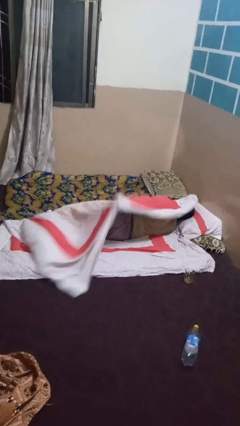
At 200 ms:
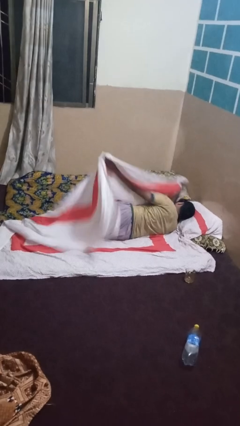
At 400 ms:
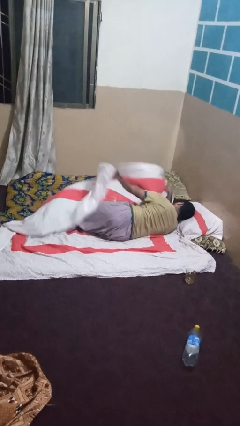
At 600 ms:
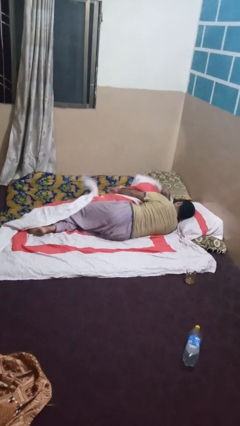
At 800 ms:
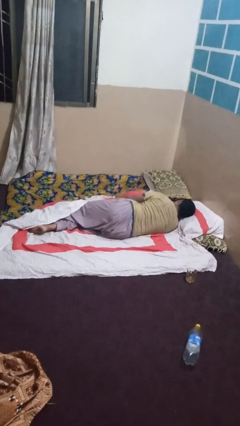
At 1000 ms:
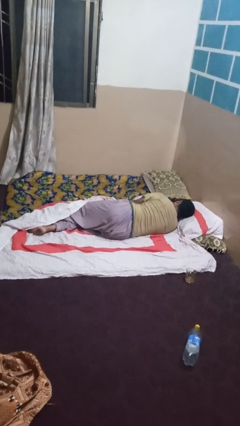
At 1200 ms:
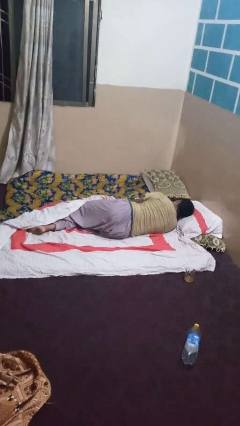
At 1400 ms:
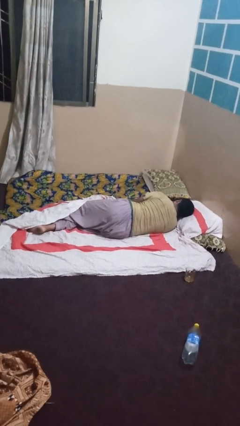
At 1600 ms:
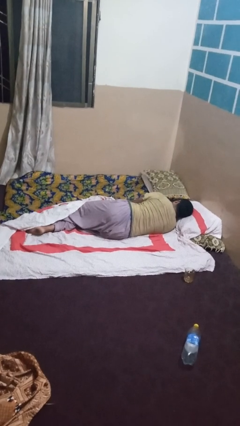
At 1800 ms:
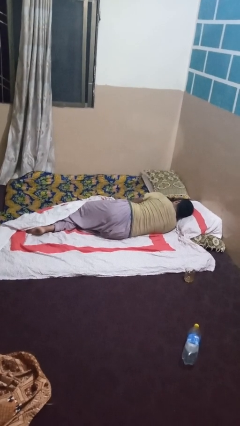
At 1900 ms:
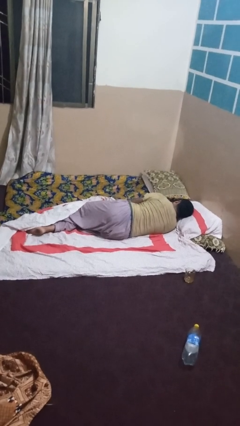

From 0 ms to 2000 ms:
person uncovers with bedsheets

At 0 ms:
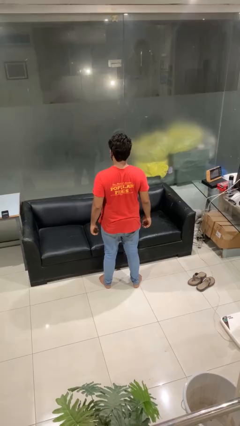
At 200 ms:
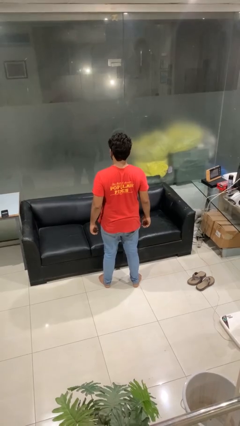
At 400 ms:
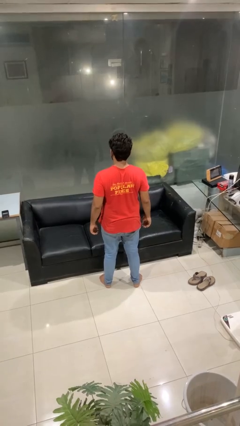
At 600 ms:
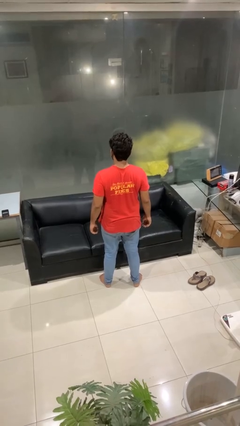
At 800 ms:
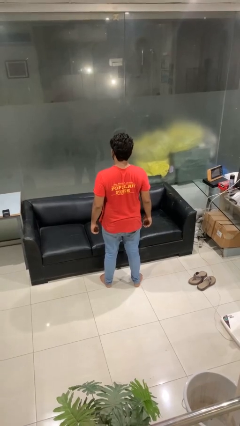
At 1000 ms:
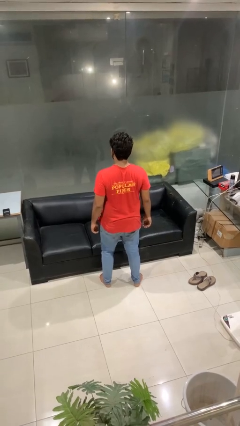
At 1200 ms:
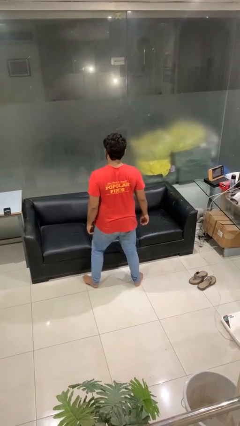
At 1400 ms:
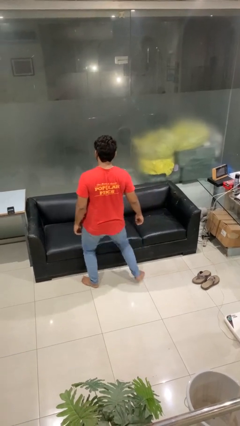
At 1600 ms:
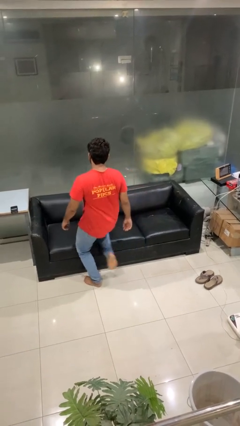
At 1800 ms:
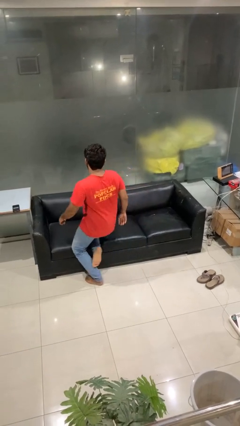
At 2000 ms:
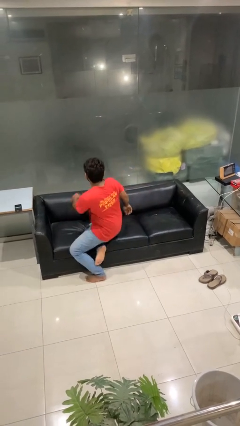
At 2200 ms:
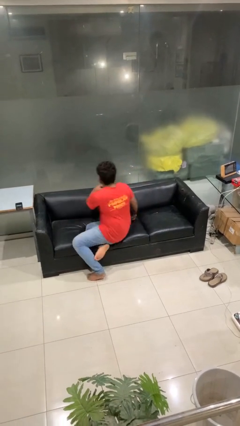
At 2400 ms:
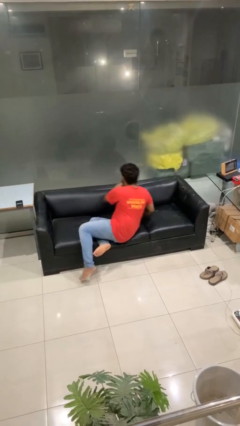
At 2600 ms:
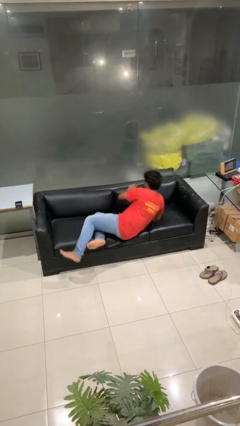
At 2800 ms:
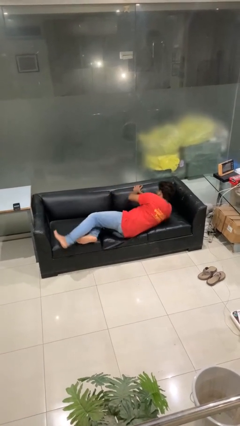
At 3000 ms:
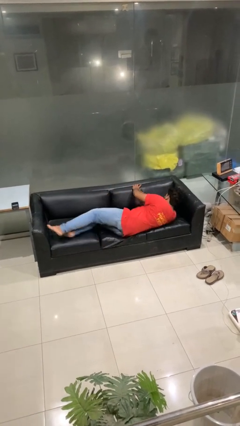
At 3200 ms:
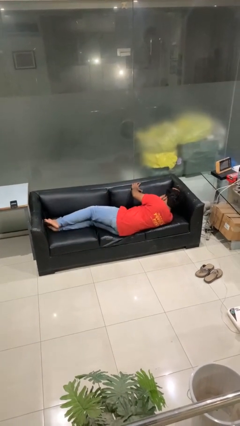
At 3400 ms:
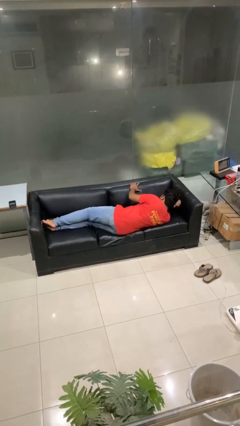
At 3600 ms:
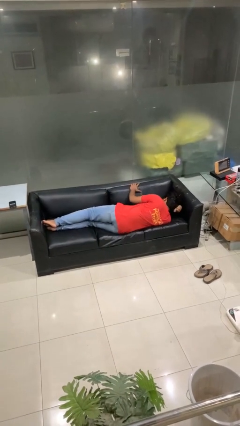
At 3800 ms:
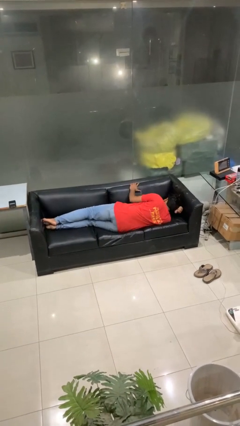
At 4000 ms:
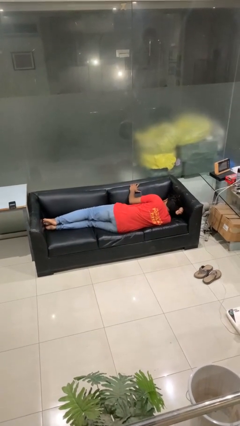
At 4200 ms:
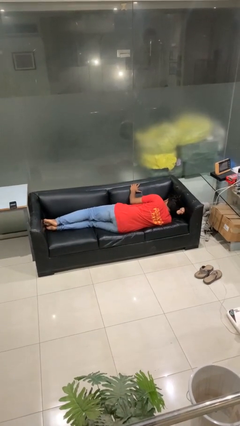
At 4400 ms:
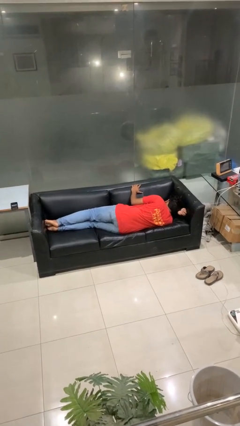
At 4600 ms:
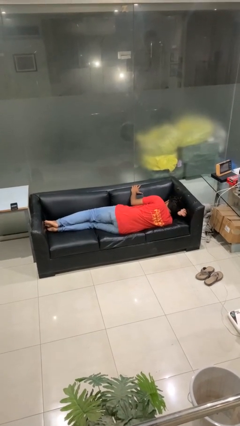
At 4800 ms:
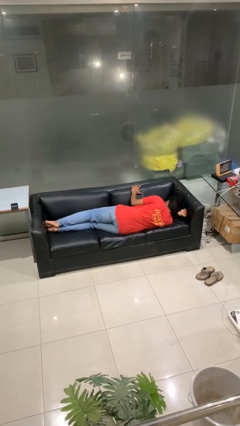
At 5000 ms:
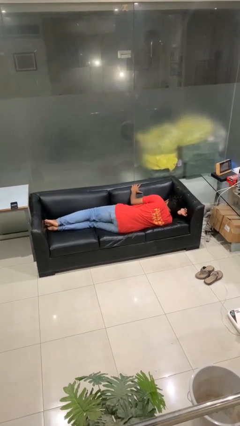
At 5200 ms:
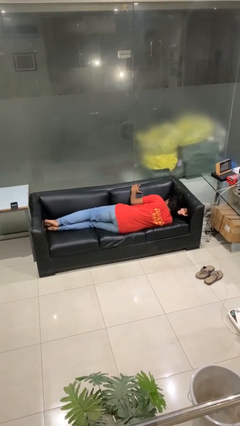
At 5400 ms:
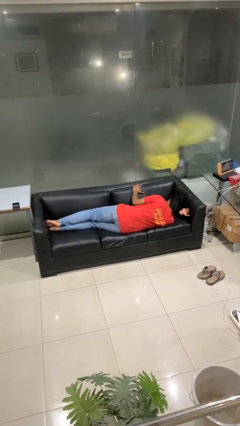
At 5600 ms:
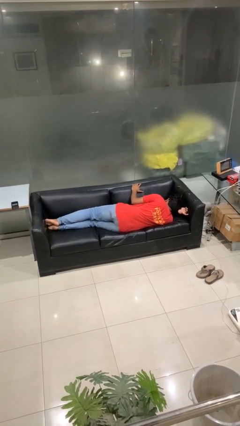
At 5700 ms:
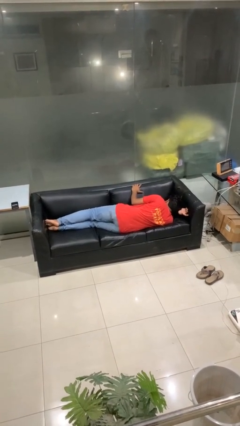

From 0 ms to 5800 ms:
person lies down on couch

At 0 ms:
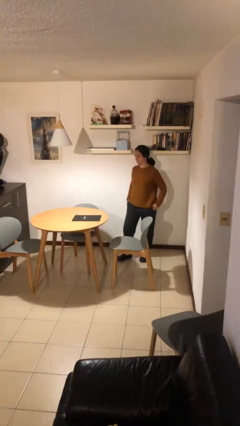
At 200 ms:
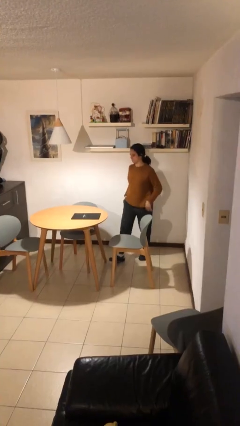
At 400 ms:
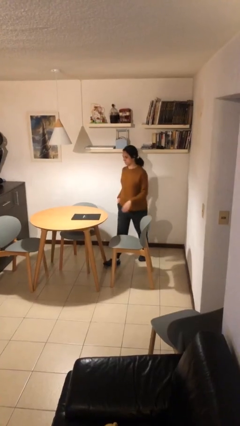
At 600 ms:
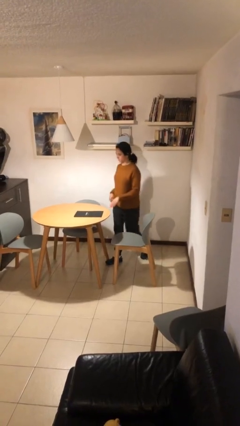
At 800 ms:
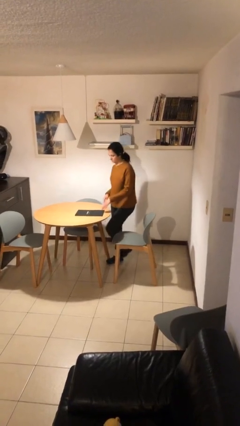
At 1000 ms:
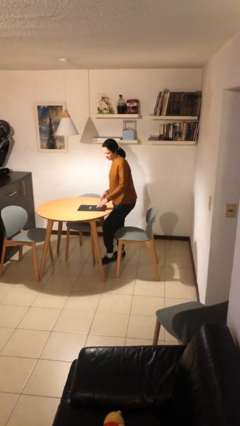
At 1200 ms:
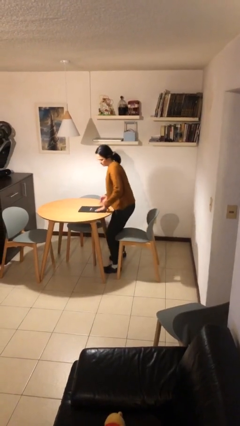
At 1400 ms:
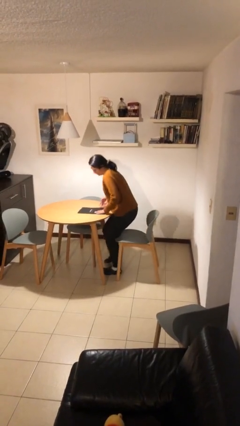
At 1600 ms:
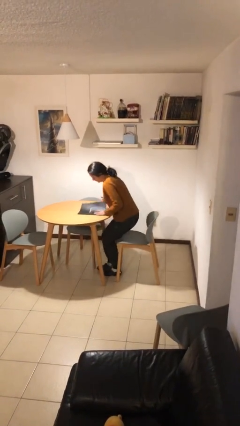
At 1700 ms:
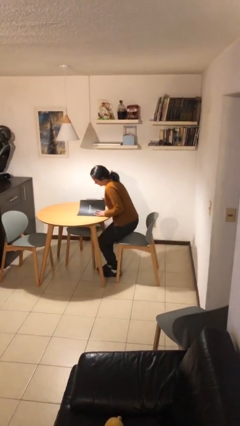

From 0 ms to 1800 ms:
person stands up

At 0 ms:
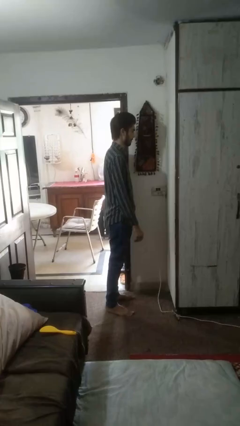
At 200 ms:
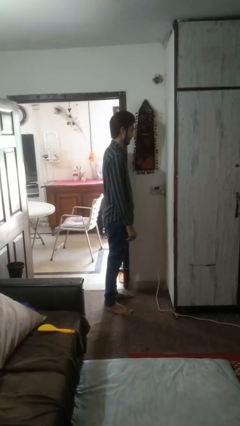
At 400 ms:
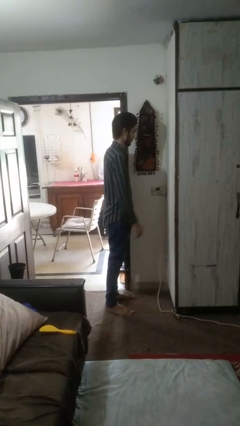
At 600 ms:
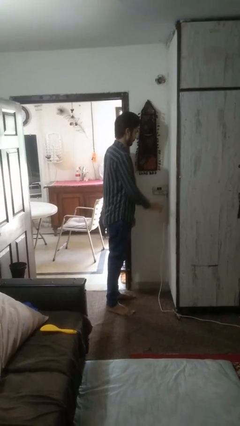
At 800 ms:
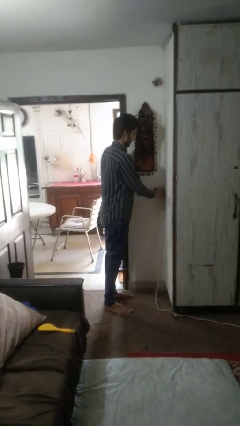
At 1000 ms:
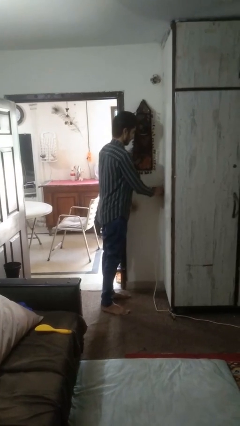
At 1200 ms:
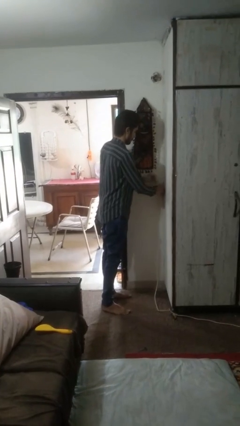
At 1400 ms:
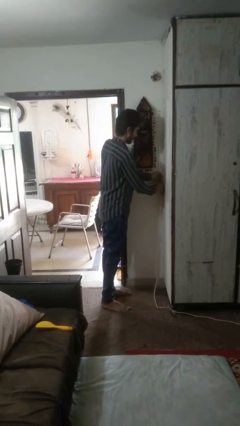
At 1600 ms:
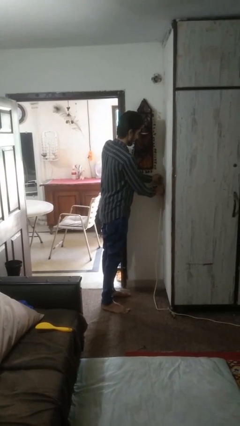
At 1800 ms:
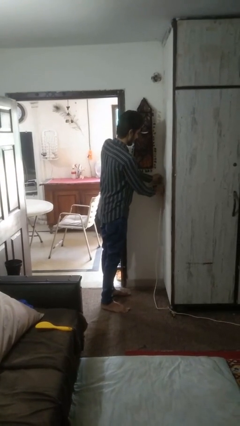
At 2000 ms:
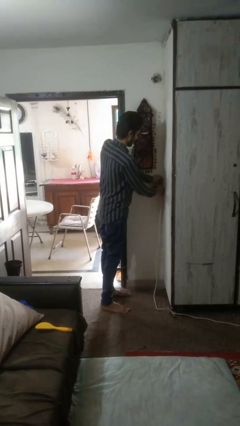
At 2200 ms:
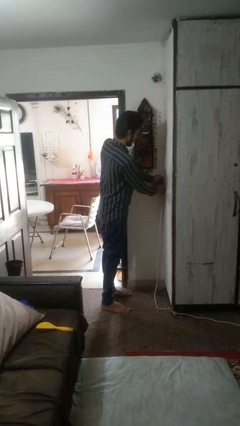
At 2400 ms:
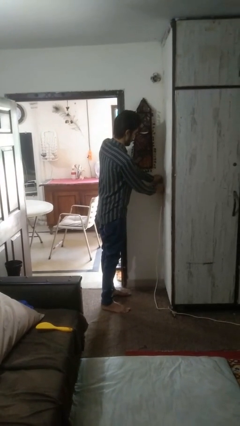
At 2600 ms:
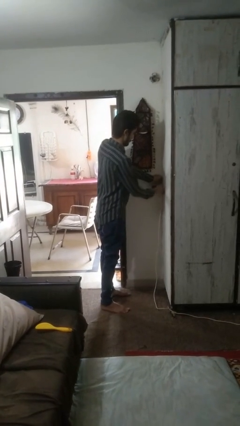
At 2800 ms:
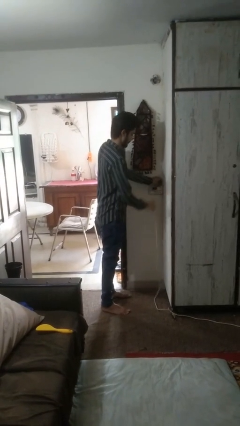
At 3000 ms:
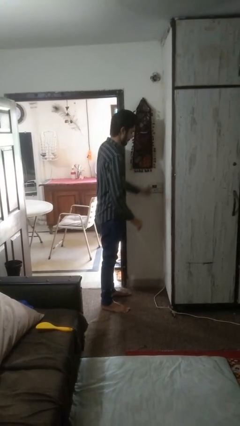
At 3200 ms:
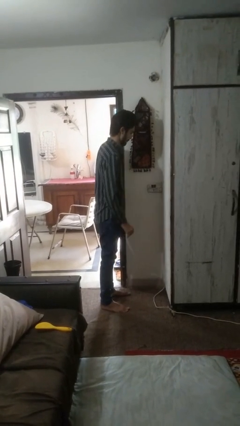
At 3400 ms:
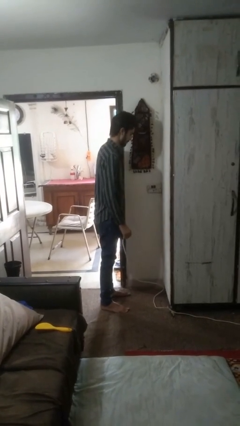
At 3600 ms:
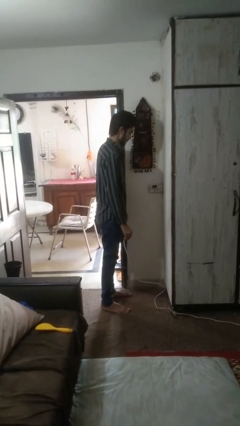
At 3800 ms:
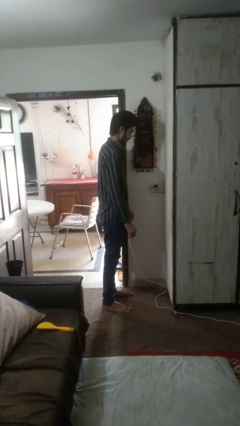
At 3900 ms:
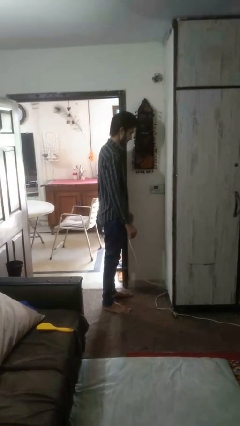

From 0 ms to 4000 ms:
person unplugs from electrical socket

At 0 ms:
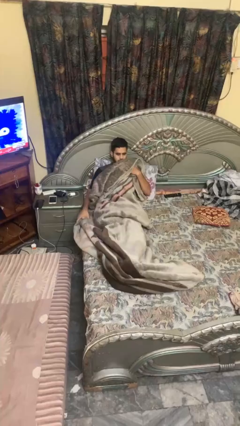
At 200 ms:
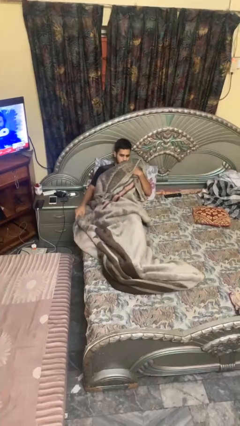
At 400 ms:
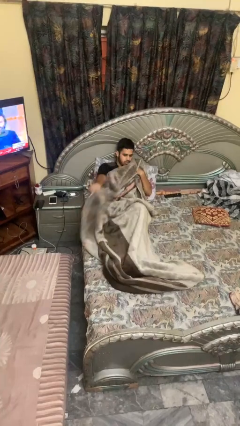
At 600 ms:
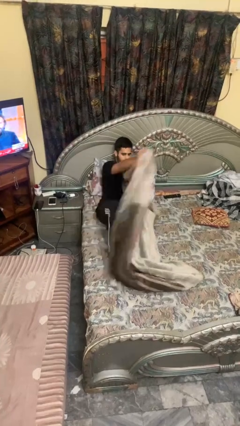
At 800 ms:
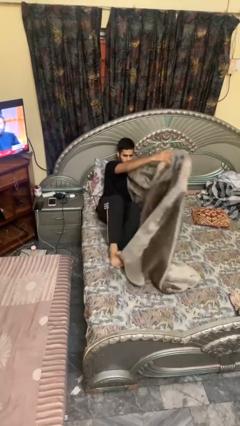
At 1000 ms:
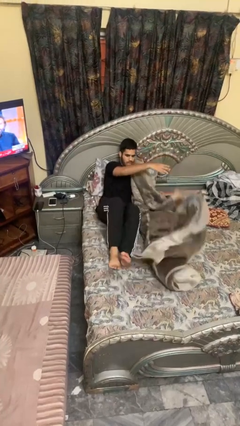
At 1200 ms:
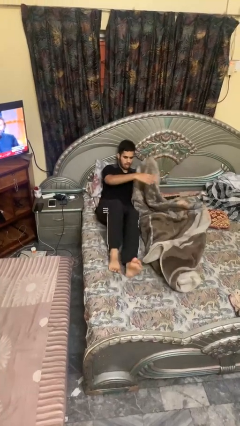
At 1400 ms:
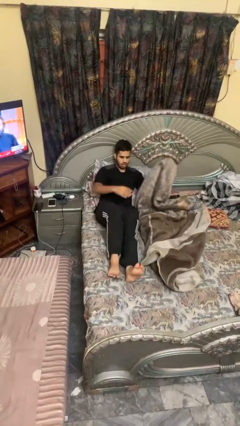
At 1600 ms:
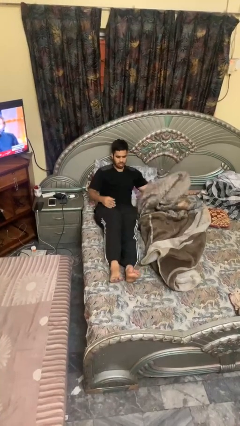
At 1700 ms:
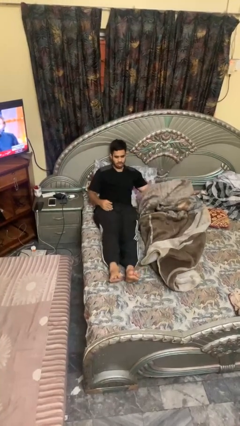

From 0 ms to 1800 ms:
person uncovers with blanket

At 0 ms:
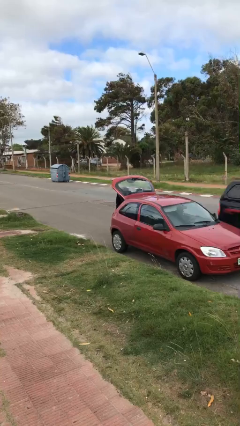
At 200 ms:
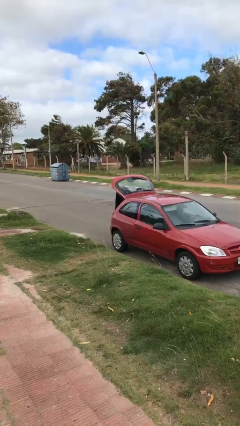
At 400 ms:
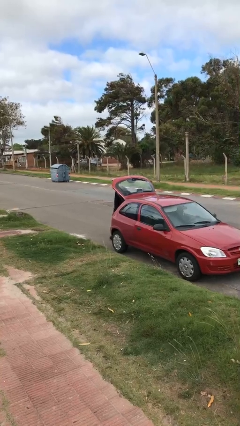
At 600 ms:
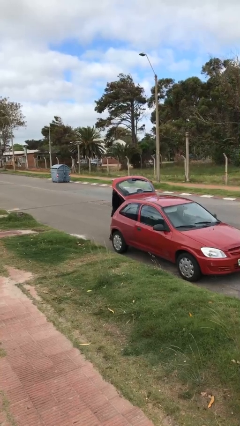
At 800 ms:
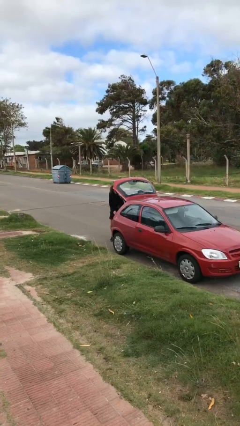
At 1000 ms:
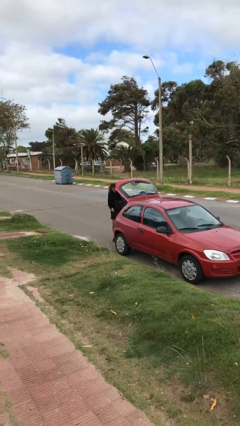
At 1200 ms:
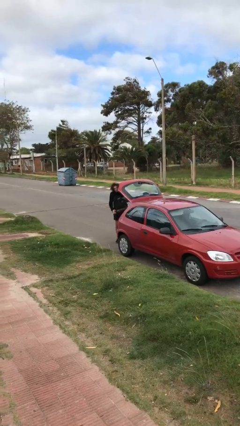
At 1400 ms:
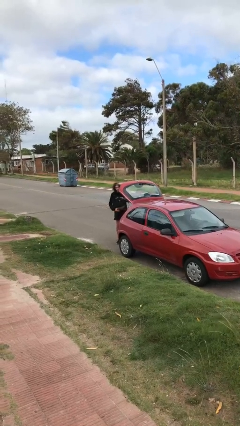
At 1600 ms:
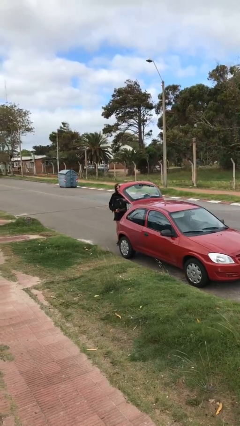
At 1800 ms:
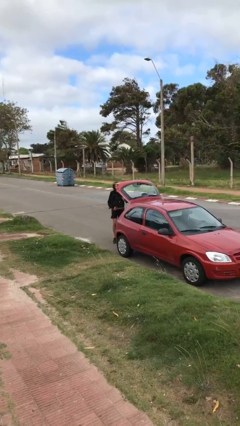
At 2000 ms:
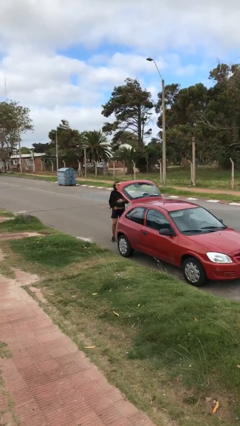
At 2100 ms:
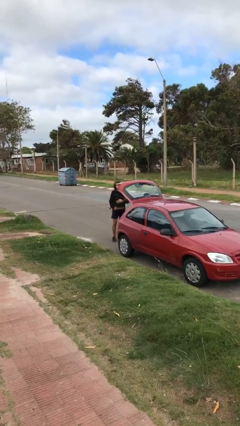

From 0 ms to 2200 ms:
person unloads car
